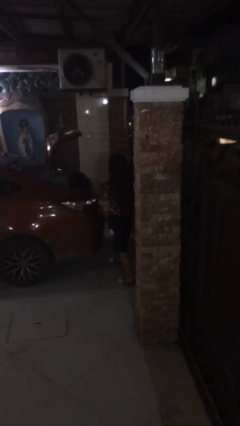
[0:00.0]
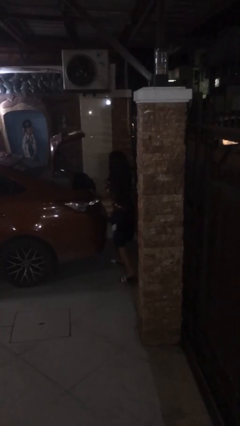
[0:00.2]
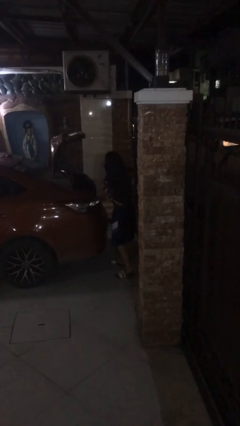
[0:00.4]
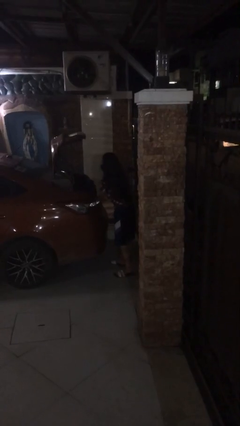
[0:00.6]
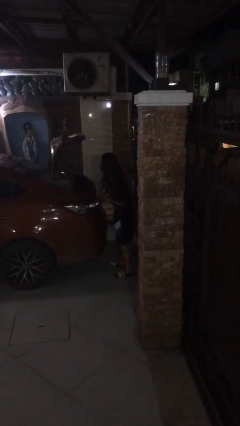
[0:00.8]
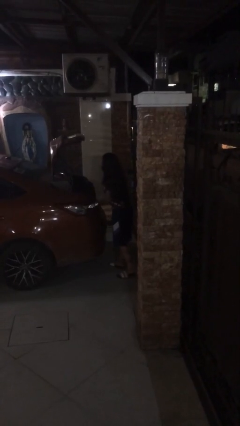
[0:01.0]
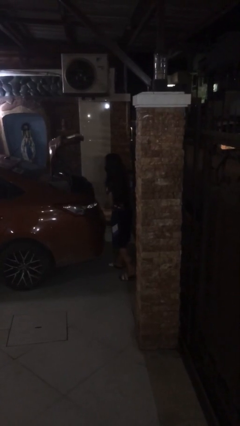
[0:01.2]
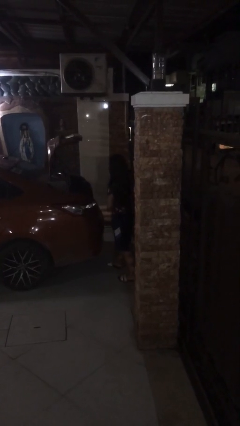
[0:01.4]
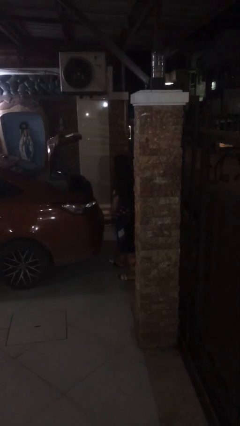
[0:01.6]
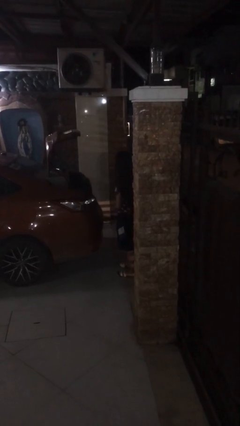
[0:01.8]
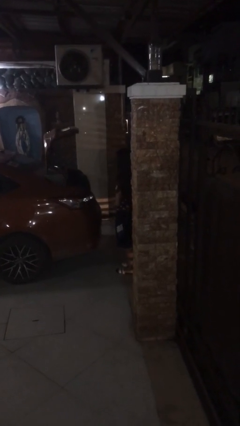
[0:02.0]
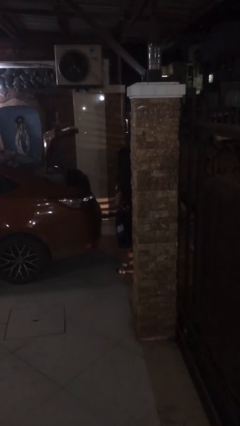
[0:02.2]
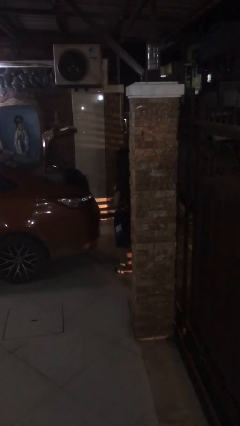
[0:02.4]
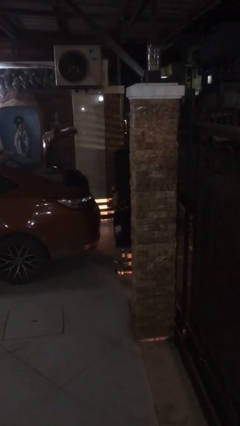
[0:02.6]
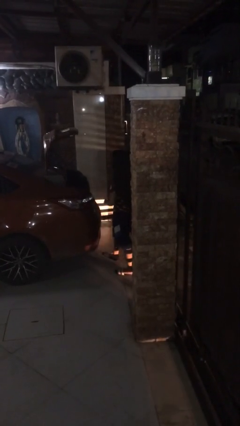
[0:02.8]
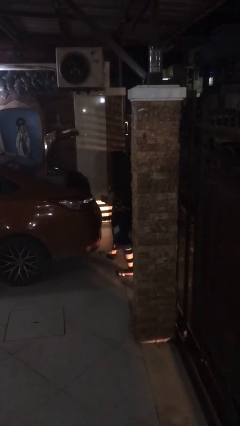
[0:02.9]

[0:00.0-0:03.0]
person loads car

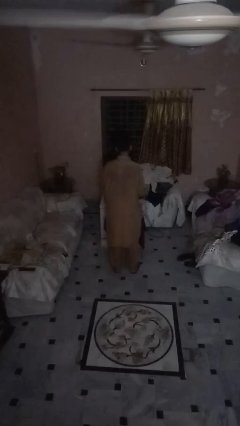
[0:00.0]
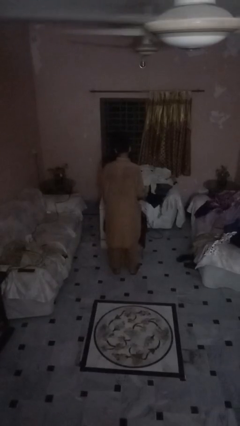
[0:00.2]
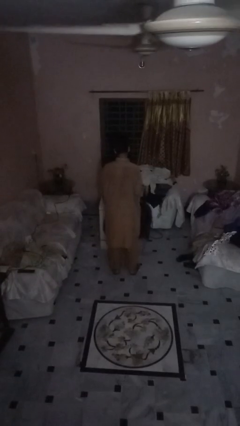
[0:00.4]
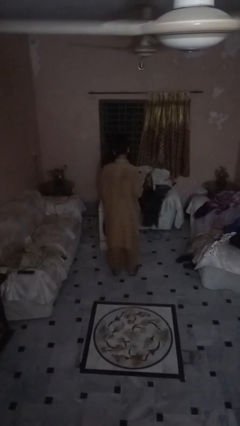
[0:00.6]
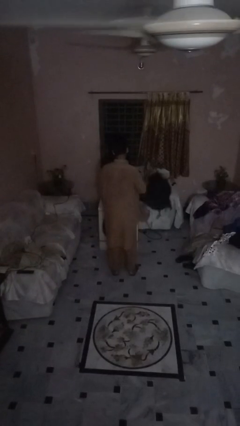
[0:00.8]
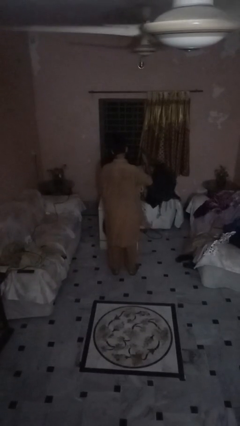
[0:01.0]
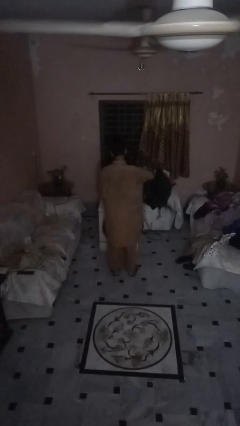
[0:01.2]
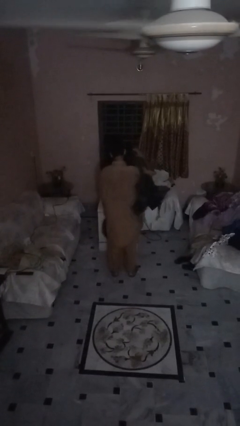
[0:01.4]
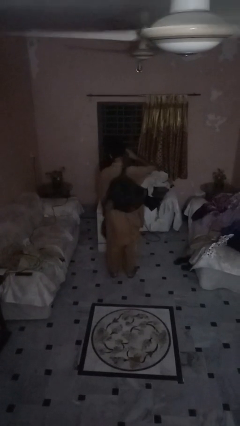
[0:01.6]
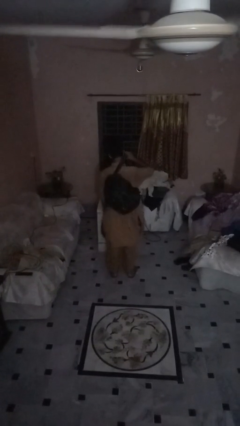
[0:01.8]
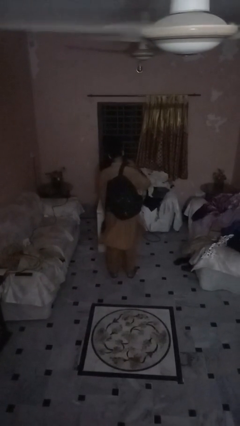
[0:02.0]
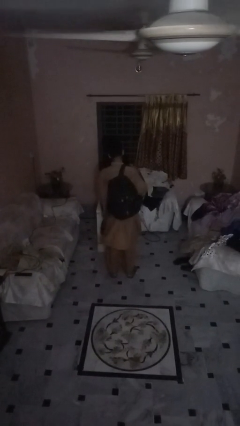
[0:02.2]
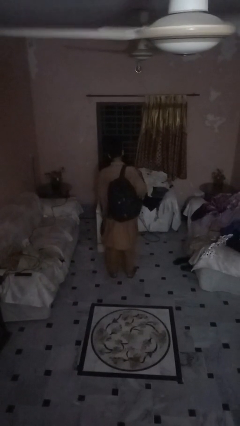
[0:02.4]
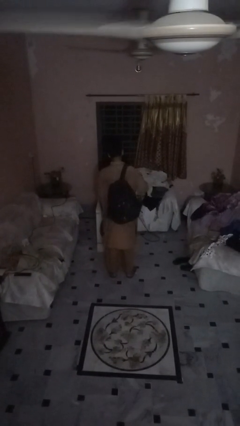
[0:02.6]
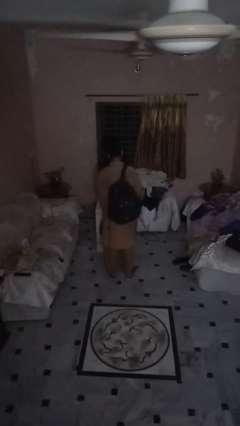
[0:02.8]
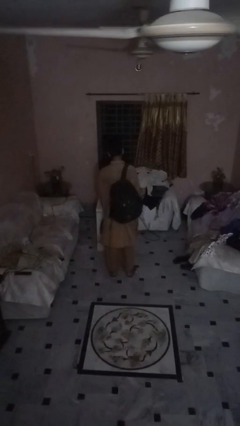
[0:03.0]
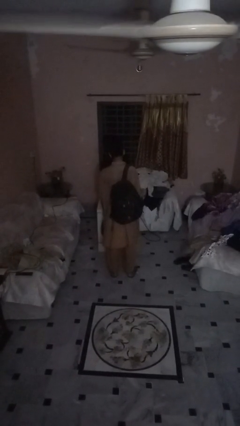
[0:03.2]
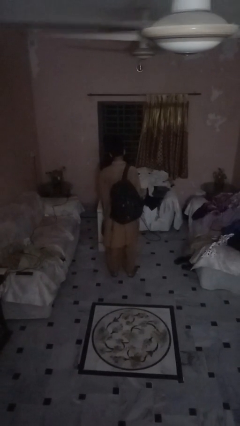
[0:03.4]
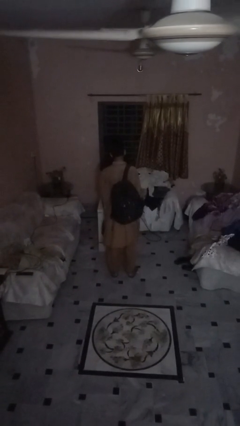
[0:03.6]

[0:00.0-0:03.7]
person puts on backpack

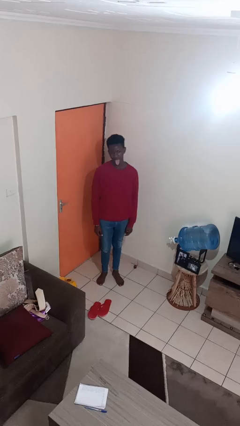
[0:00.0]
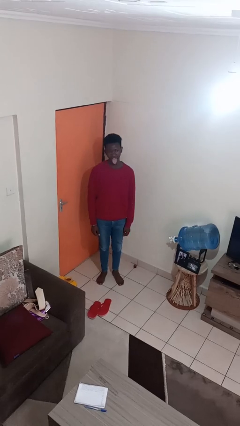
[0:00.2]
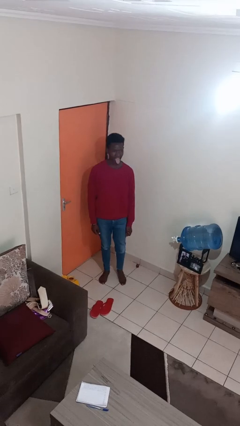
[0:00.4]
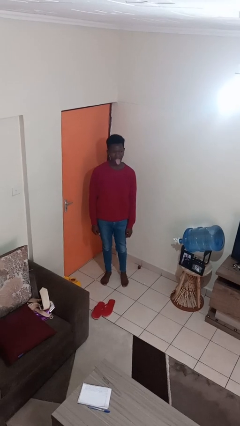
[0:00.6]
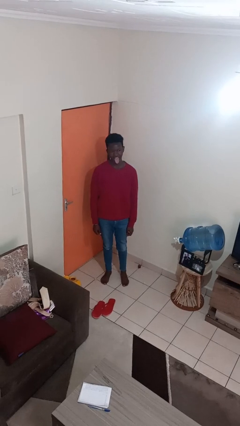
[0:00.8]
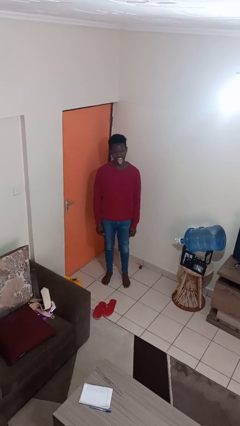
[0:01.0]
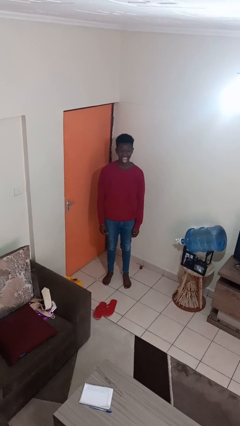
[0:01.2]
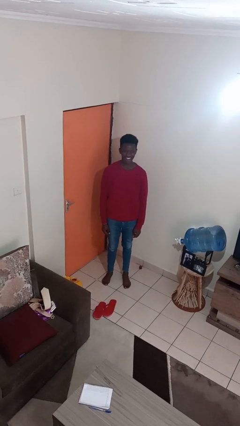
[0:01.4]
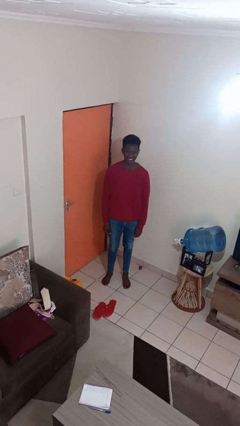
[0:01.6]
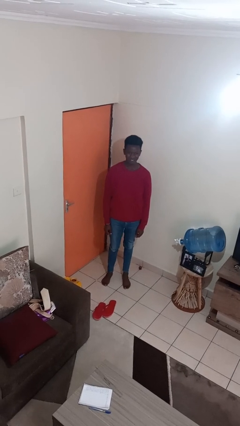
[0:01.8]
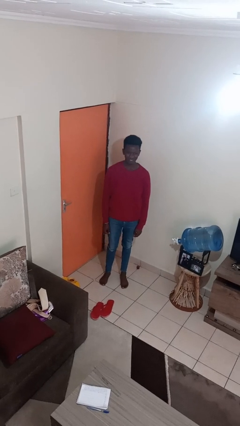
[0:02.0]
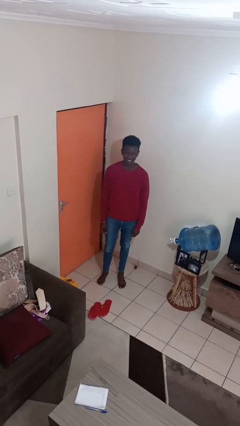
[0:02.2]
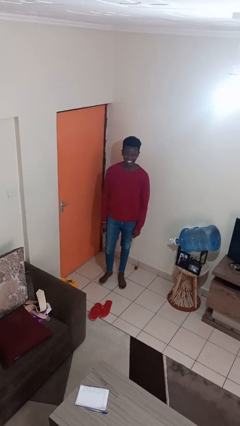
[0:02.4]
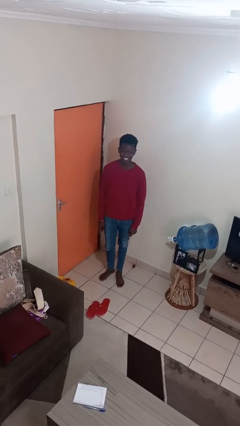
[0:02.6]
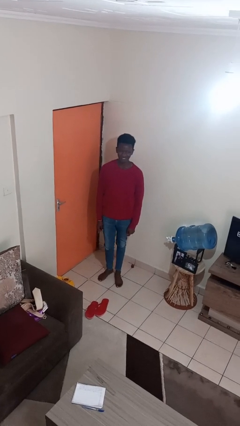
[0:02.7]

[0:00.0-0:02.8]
person sticks out tongue

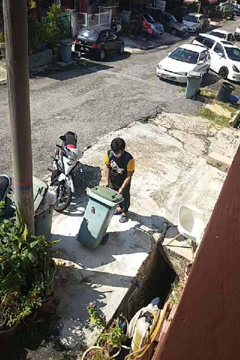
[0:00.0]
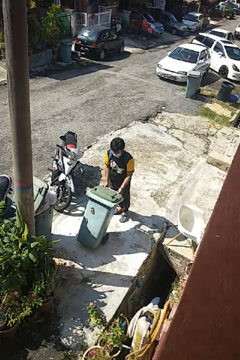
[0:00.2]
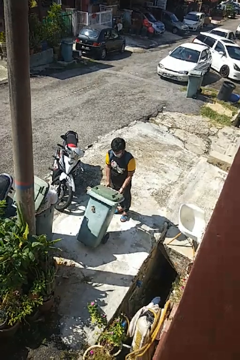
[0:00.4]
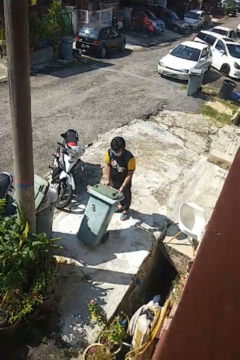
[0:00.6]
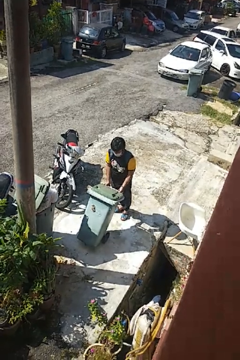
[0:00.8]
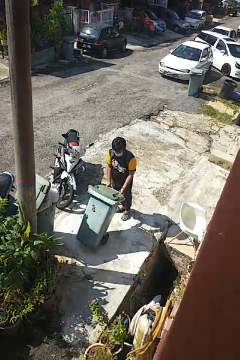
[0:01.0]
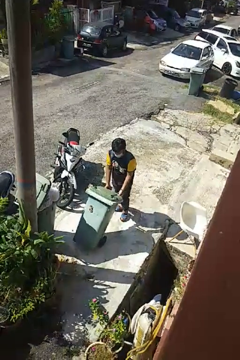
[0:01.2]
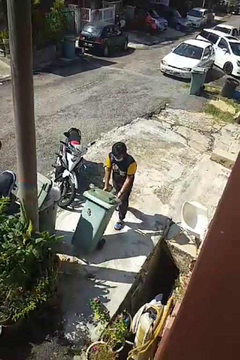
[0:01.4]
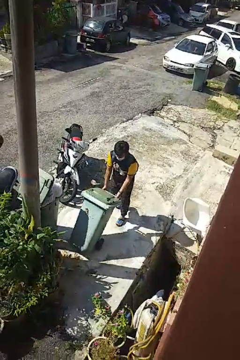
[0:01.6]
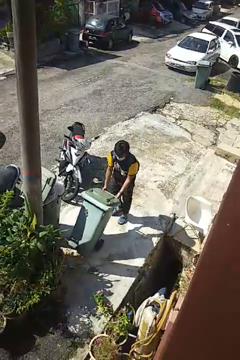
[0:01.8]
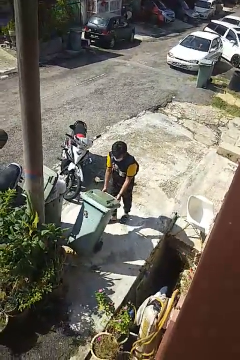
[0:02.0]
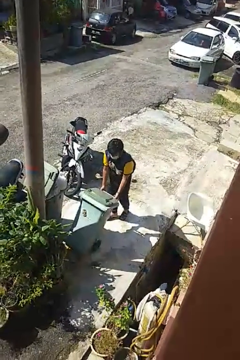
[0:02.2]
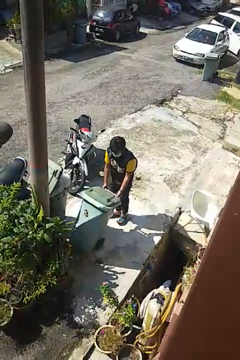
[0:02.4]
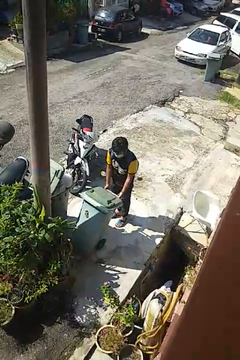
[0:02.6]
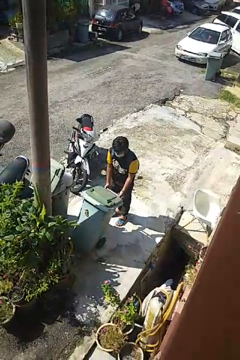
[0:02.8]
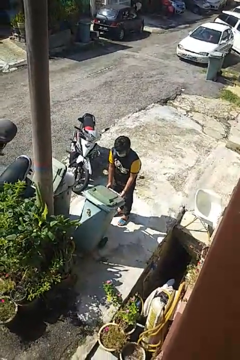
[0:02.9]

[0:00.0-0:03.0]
person pushes wheeled trashcan

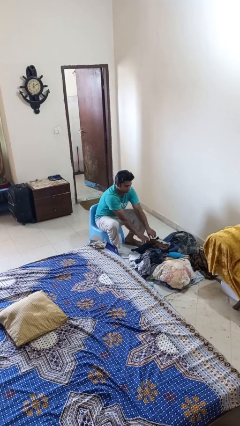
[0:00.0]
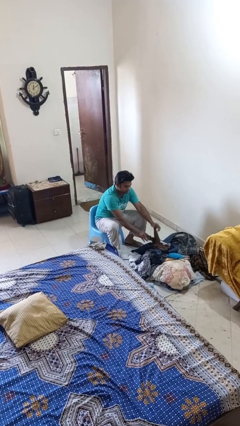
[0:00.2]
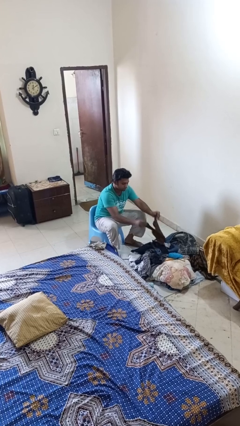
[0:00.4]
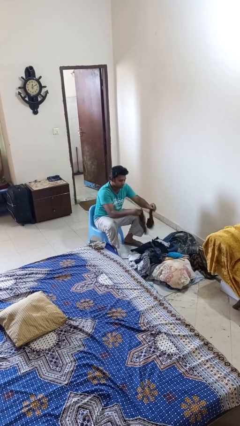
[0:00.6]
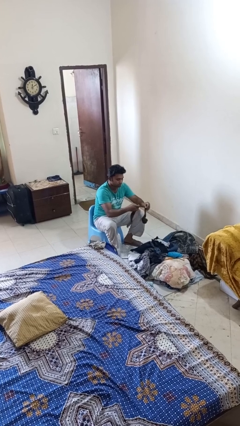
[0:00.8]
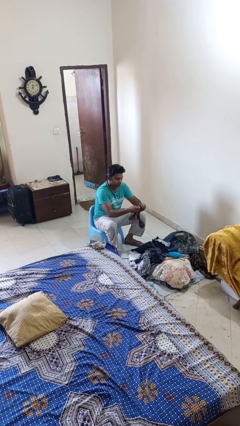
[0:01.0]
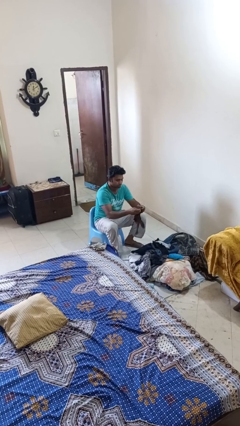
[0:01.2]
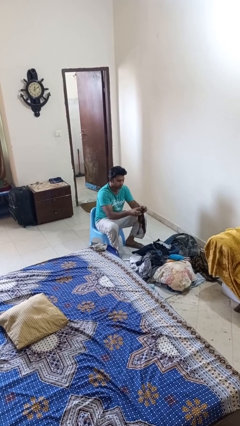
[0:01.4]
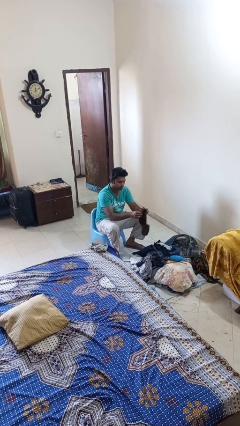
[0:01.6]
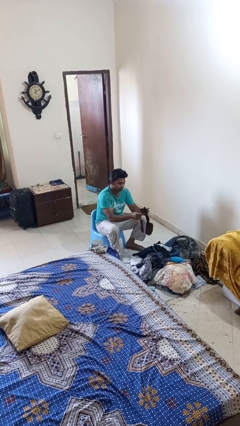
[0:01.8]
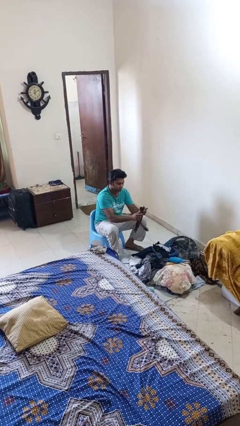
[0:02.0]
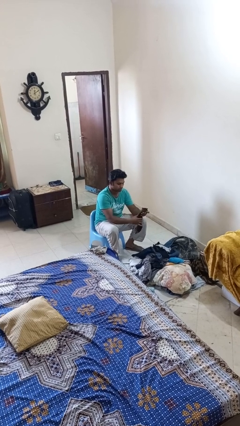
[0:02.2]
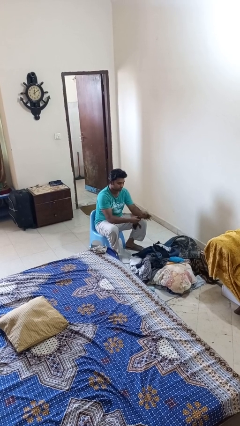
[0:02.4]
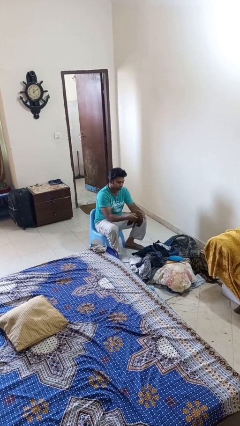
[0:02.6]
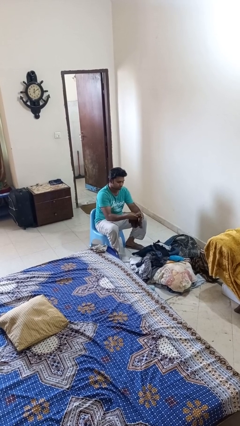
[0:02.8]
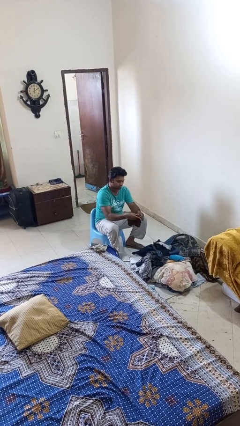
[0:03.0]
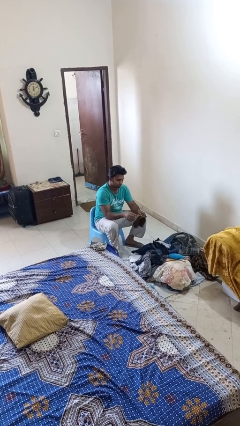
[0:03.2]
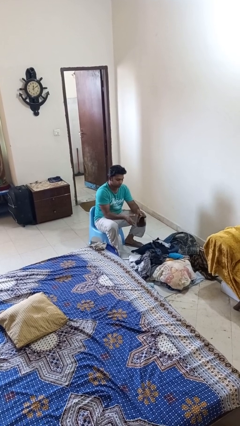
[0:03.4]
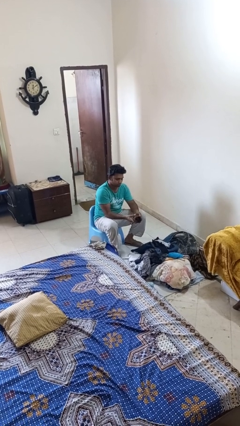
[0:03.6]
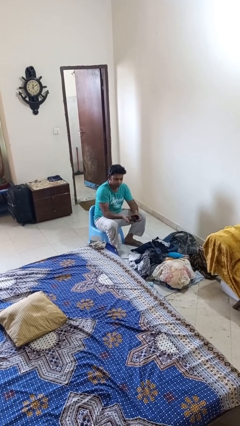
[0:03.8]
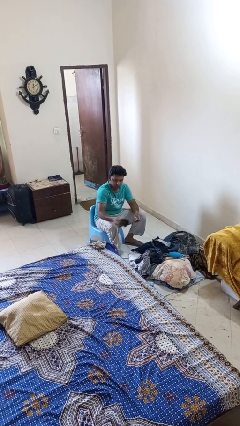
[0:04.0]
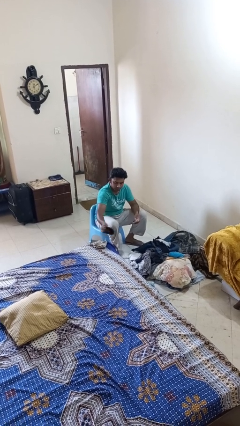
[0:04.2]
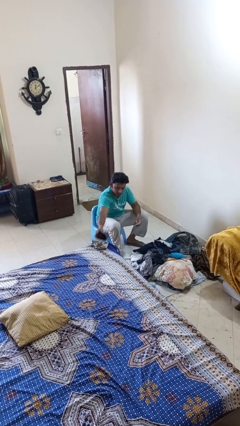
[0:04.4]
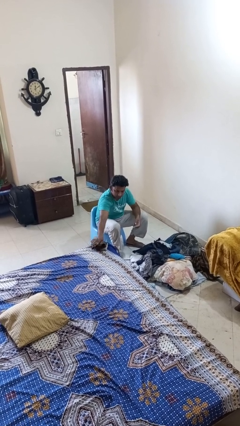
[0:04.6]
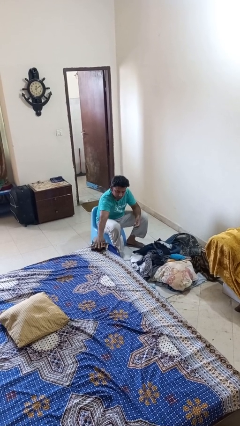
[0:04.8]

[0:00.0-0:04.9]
person folds socks

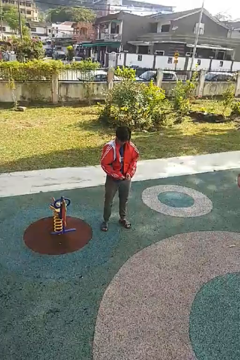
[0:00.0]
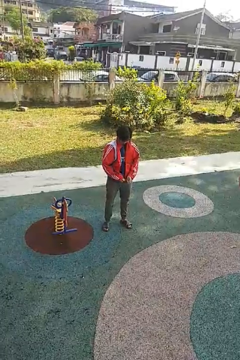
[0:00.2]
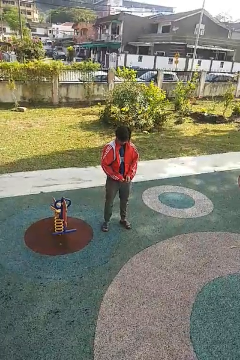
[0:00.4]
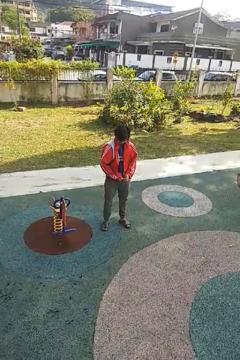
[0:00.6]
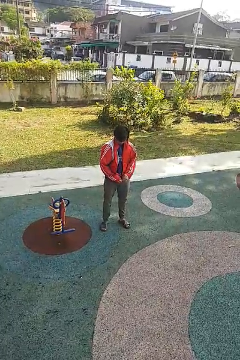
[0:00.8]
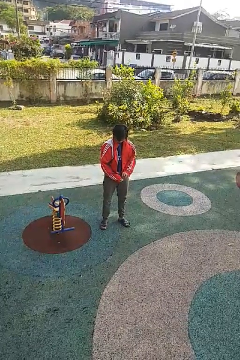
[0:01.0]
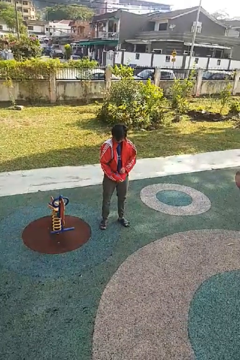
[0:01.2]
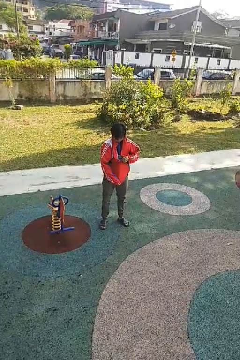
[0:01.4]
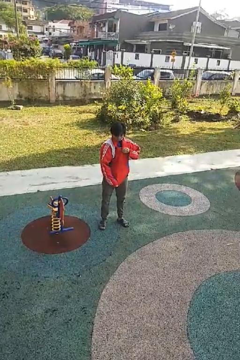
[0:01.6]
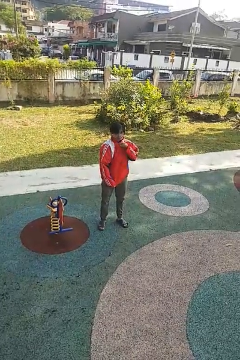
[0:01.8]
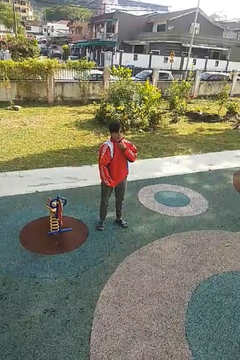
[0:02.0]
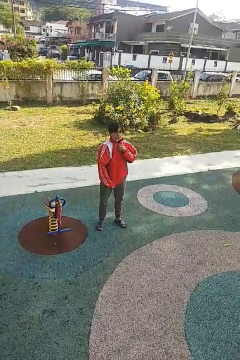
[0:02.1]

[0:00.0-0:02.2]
person zips up jacket
